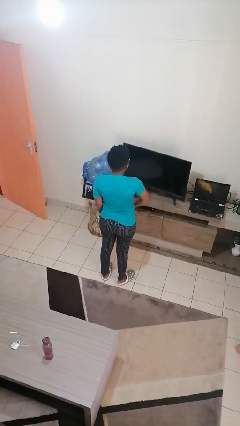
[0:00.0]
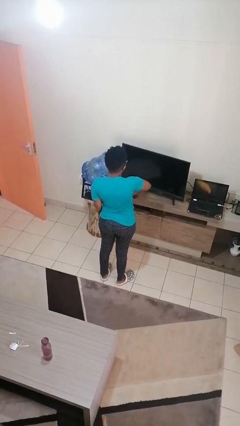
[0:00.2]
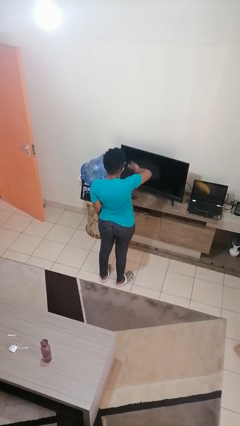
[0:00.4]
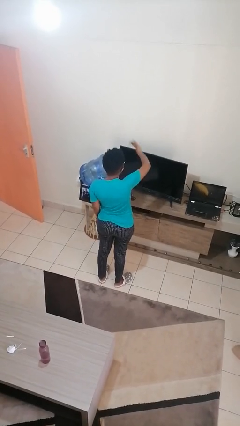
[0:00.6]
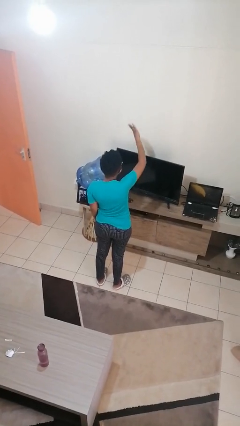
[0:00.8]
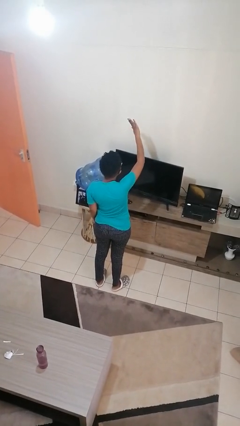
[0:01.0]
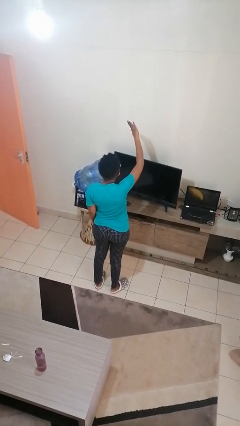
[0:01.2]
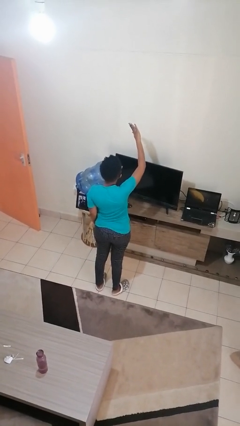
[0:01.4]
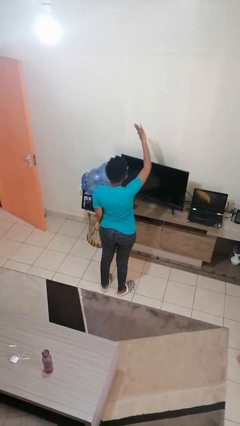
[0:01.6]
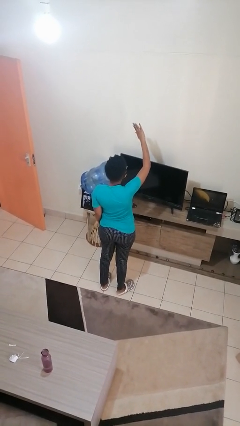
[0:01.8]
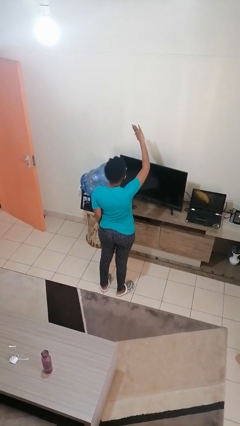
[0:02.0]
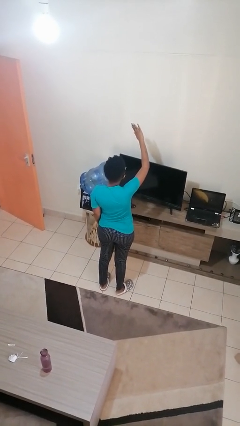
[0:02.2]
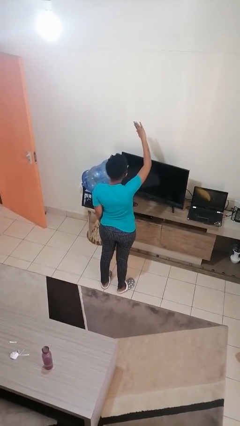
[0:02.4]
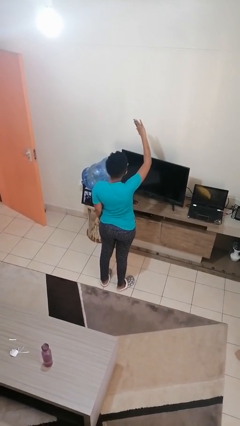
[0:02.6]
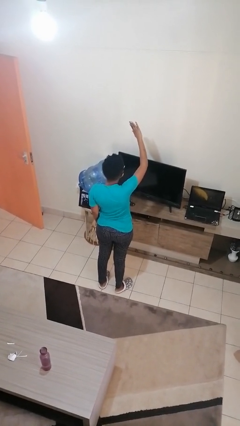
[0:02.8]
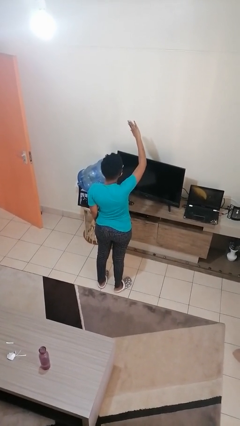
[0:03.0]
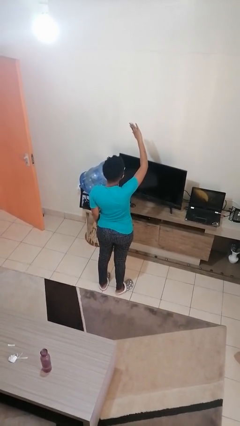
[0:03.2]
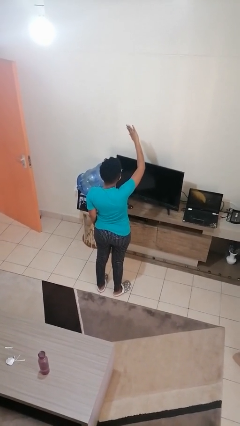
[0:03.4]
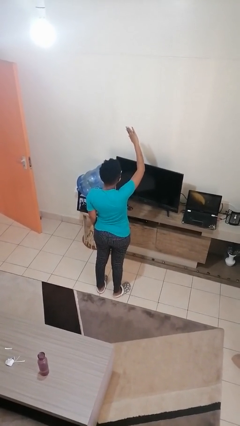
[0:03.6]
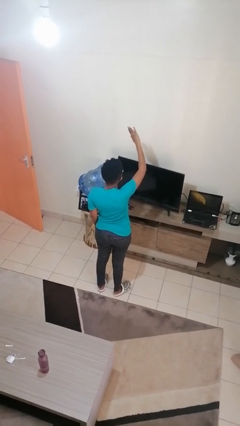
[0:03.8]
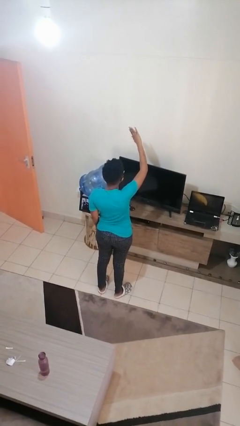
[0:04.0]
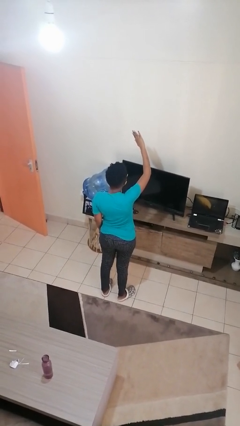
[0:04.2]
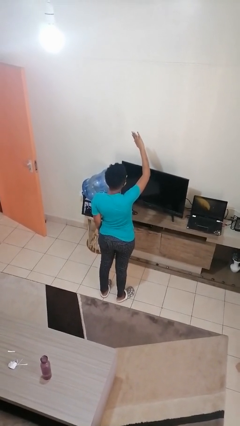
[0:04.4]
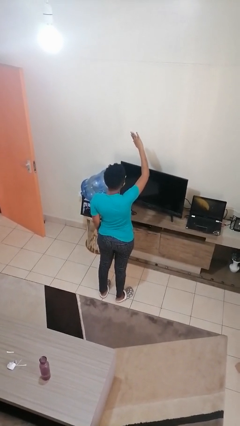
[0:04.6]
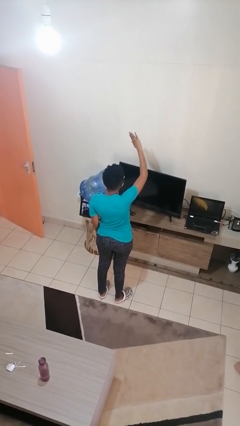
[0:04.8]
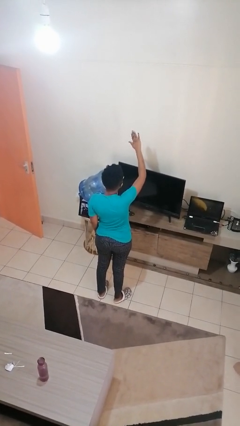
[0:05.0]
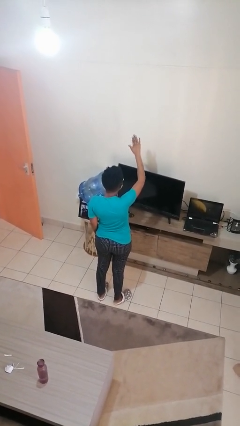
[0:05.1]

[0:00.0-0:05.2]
person gestures swipe up

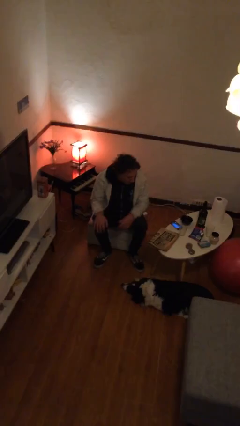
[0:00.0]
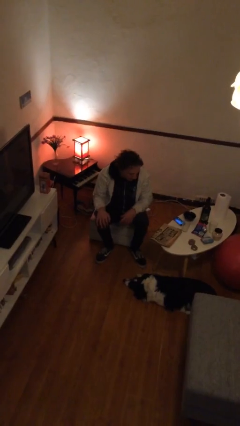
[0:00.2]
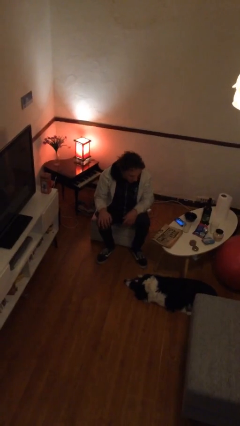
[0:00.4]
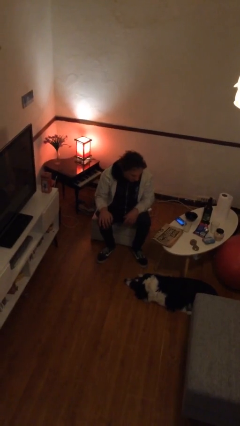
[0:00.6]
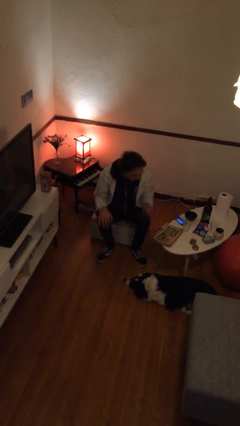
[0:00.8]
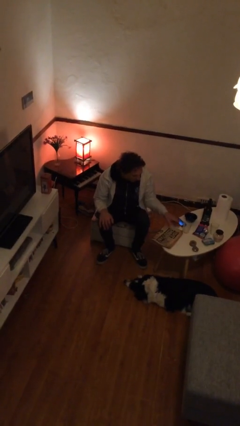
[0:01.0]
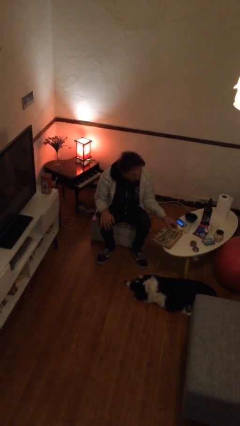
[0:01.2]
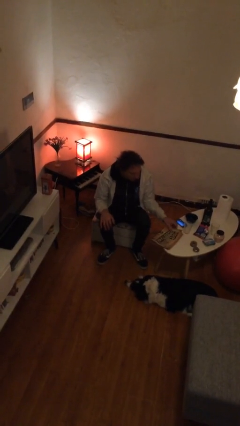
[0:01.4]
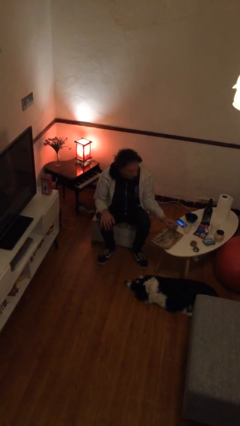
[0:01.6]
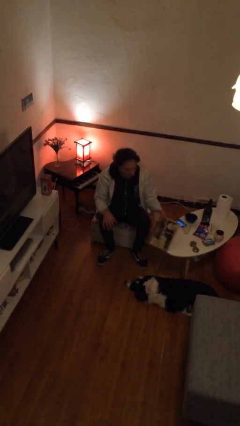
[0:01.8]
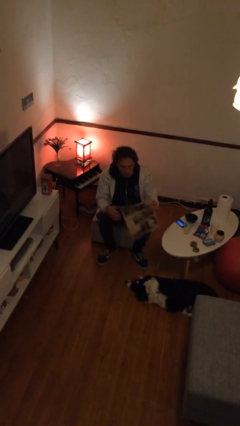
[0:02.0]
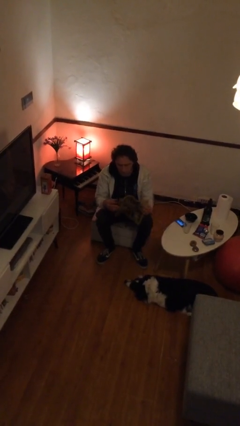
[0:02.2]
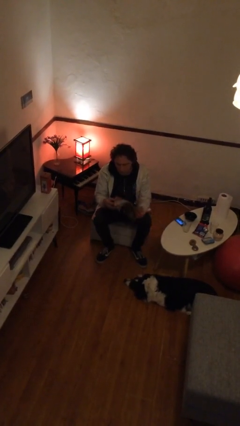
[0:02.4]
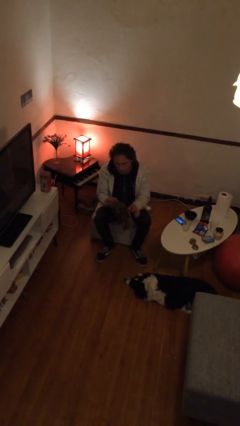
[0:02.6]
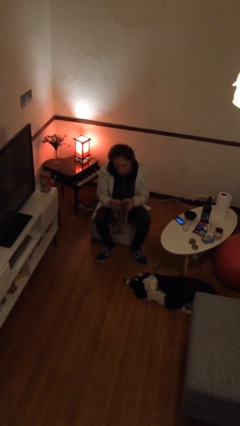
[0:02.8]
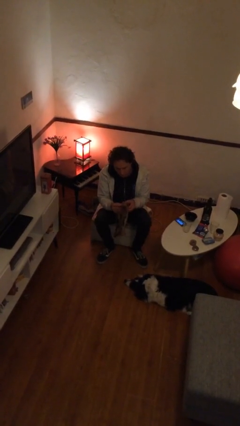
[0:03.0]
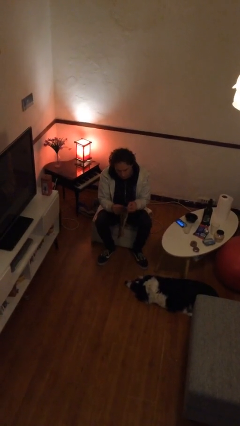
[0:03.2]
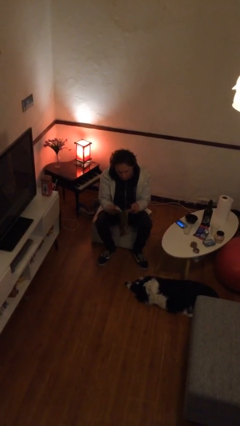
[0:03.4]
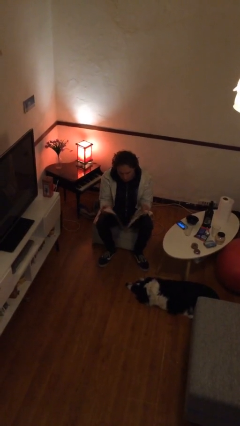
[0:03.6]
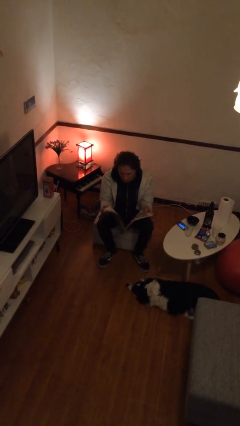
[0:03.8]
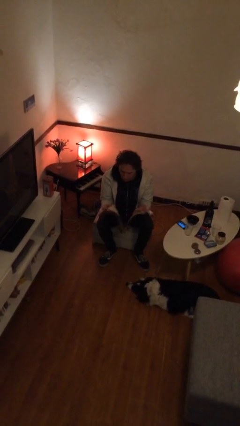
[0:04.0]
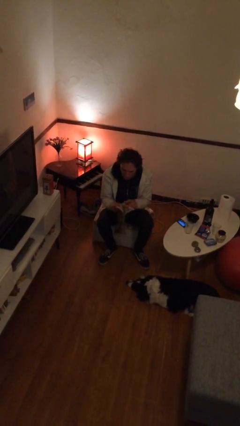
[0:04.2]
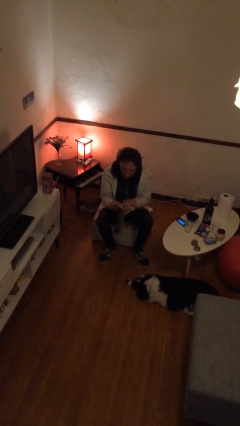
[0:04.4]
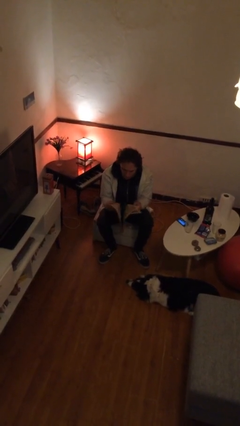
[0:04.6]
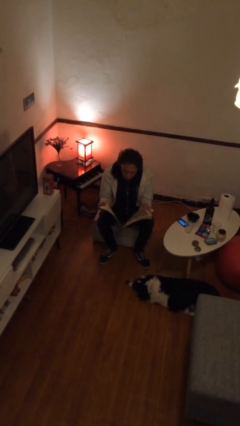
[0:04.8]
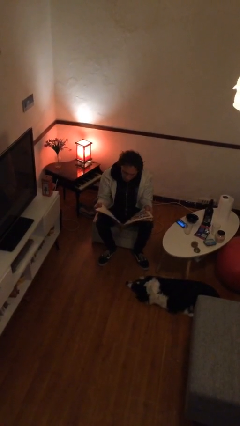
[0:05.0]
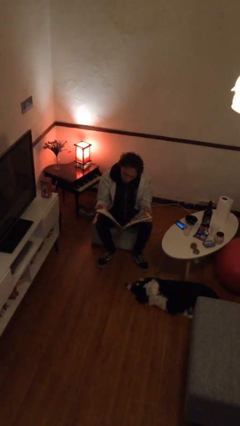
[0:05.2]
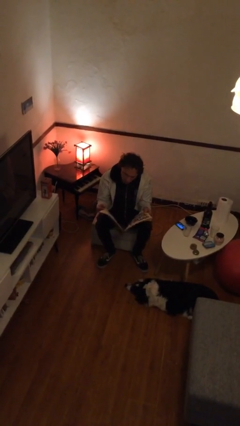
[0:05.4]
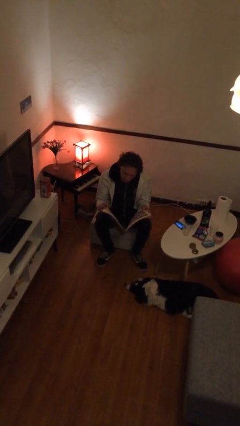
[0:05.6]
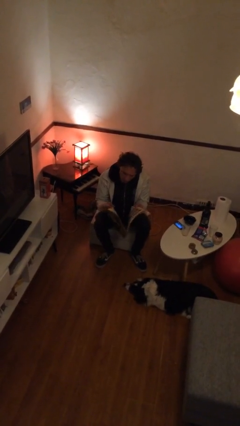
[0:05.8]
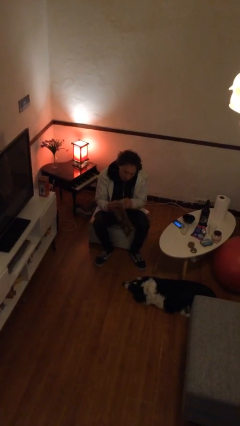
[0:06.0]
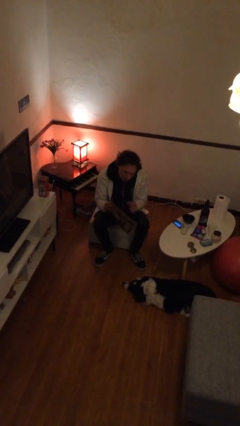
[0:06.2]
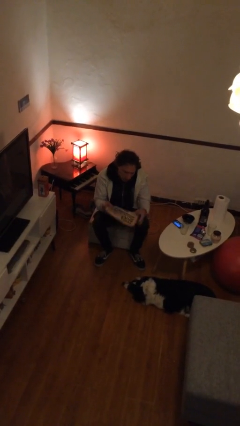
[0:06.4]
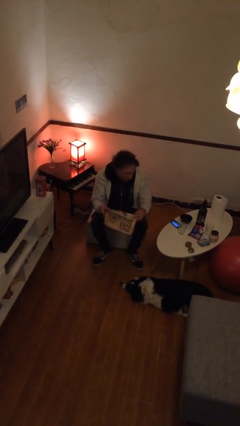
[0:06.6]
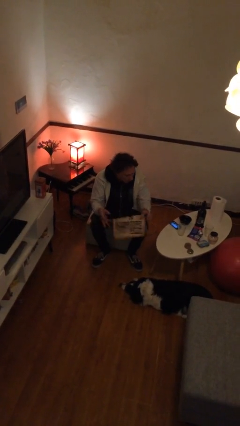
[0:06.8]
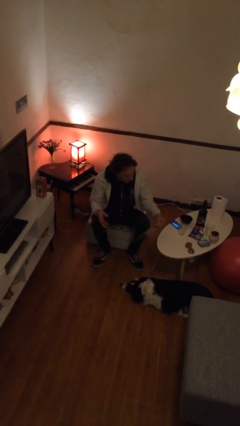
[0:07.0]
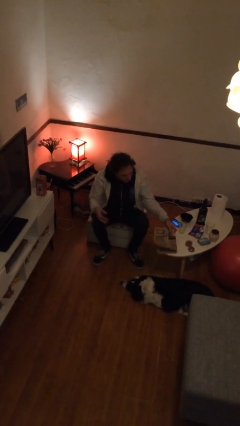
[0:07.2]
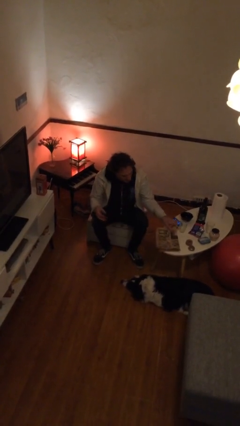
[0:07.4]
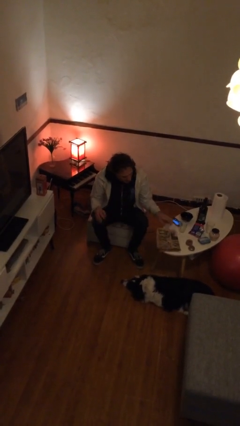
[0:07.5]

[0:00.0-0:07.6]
person reads newspaper

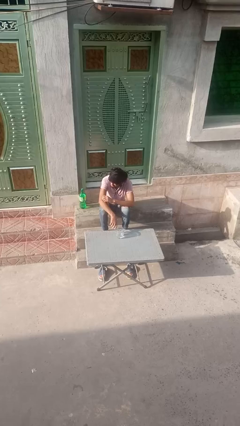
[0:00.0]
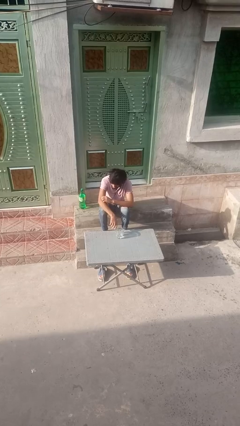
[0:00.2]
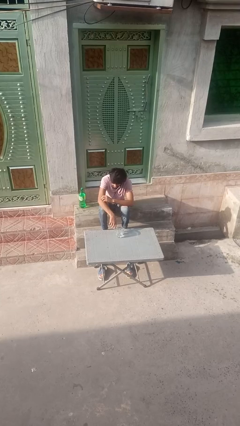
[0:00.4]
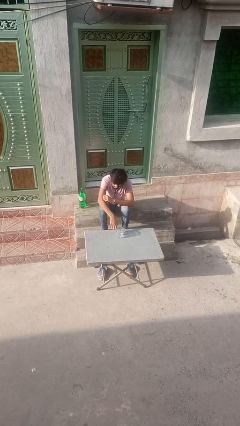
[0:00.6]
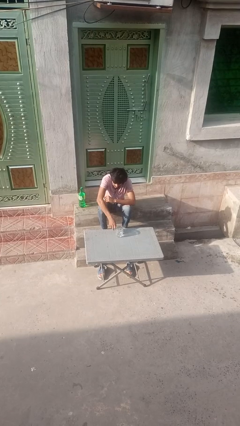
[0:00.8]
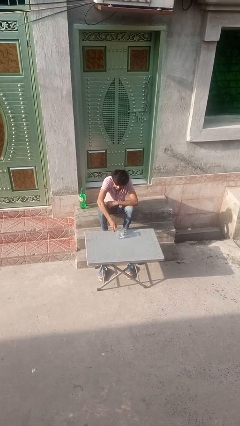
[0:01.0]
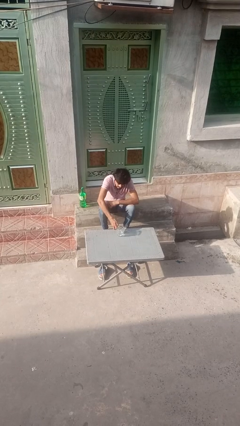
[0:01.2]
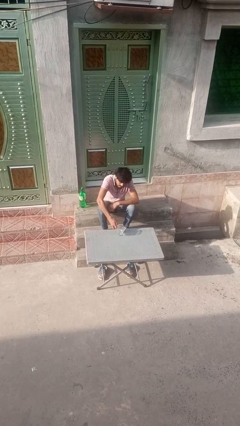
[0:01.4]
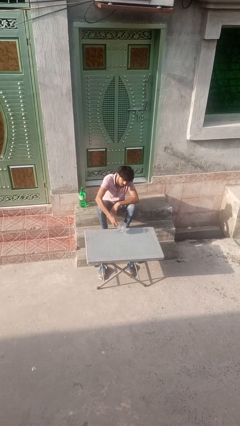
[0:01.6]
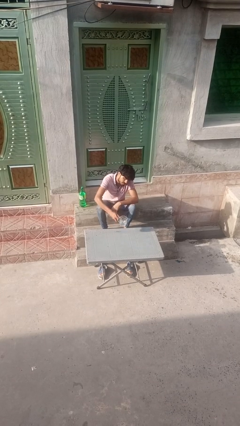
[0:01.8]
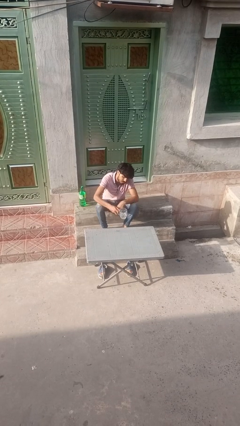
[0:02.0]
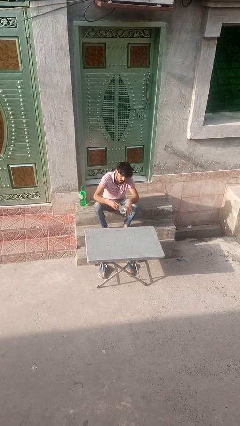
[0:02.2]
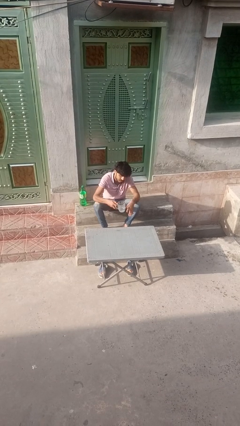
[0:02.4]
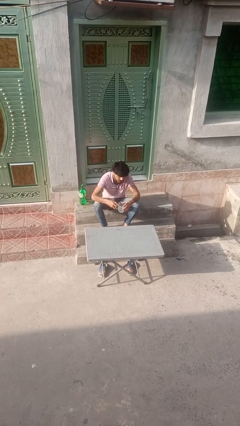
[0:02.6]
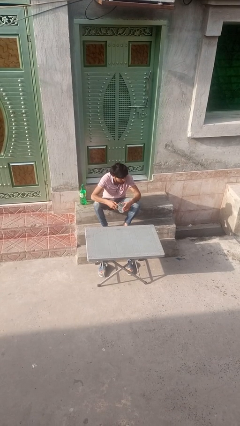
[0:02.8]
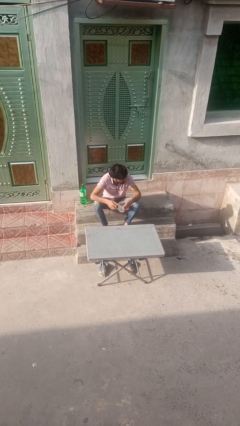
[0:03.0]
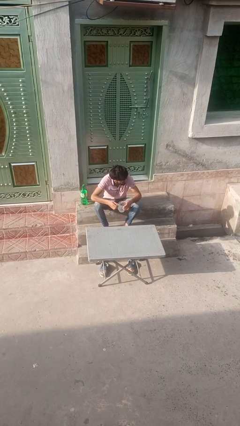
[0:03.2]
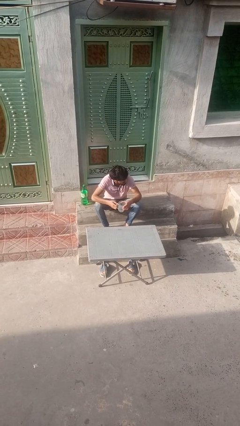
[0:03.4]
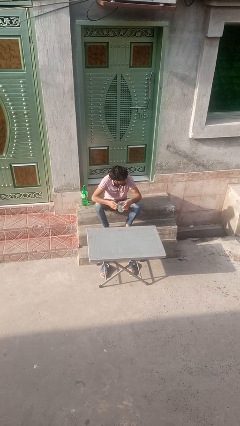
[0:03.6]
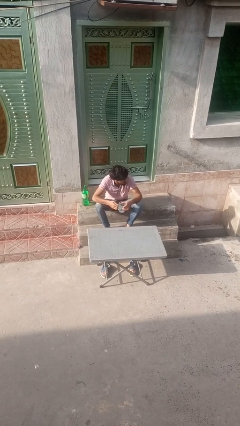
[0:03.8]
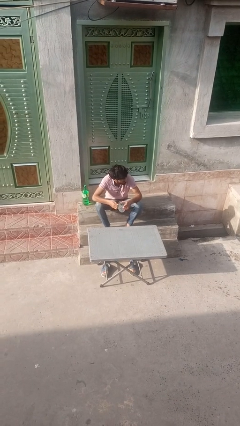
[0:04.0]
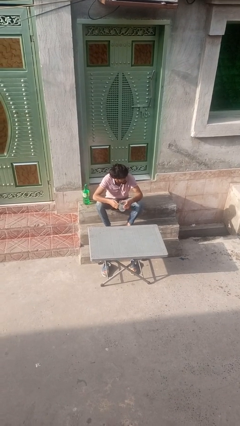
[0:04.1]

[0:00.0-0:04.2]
person picks up object from table

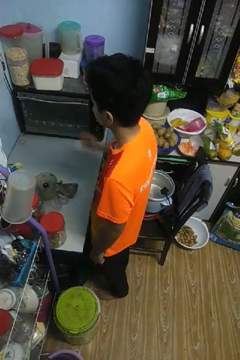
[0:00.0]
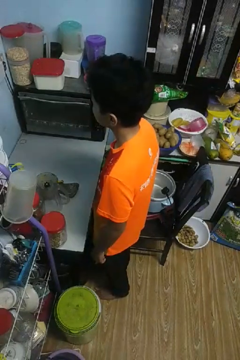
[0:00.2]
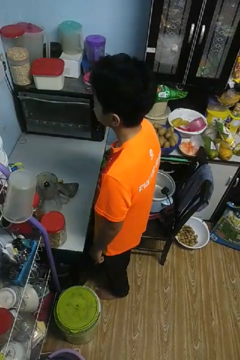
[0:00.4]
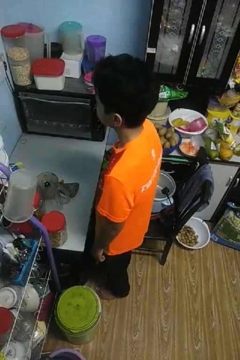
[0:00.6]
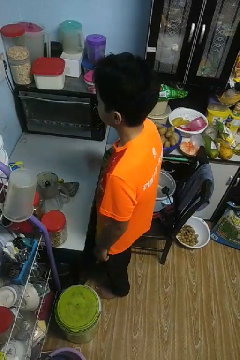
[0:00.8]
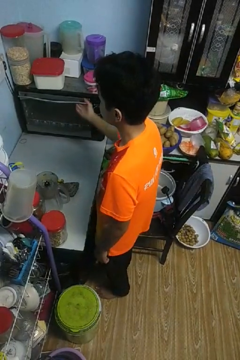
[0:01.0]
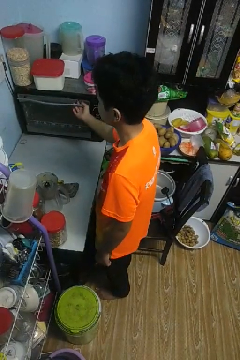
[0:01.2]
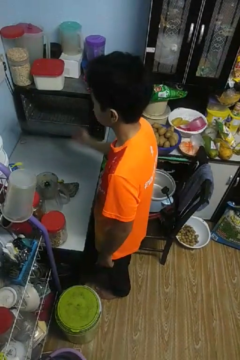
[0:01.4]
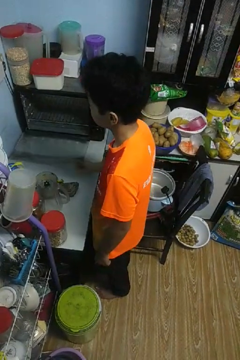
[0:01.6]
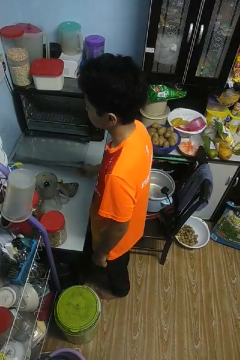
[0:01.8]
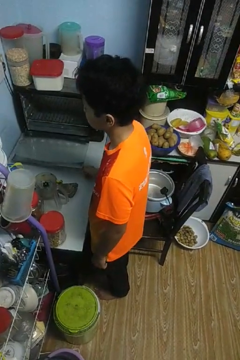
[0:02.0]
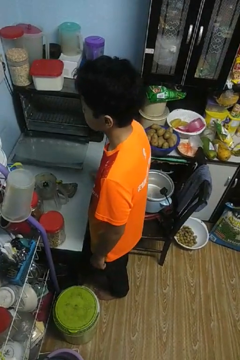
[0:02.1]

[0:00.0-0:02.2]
person opens oven door
